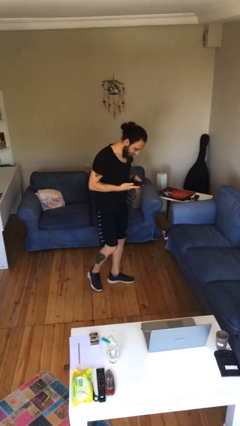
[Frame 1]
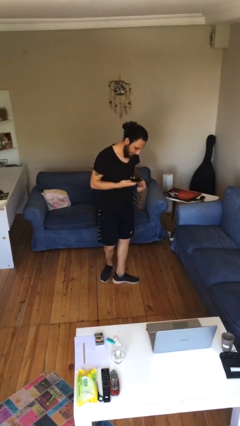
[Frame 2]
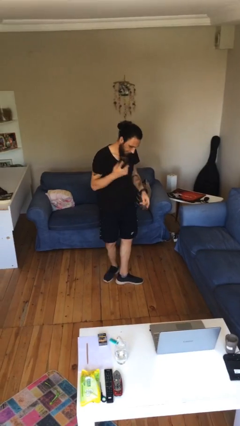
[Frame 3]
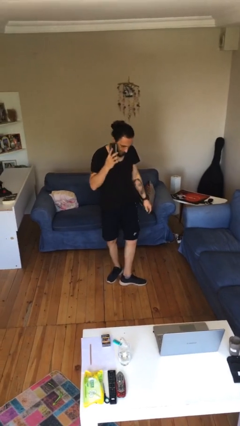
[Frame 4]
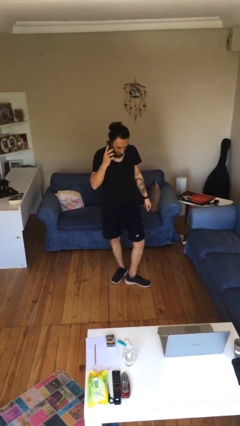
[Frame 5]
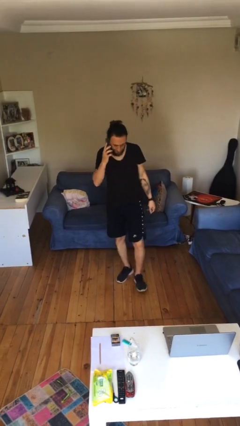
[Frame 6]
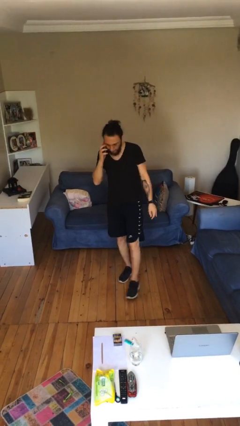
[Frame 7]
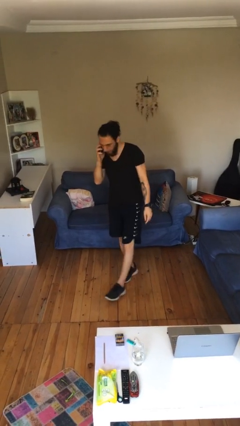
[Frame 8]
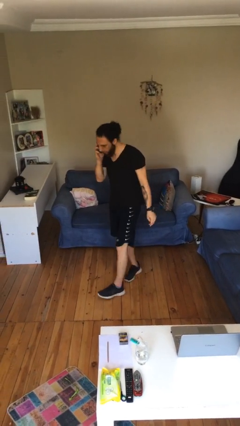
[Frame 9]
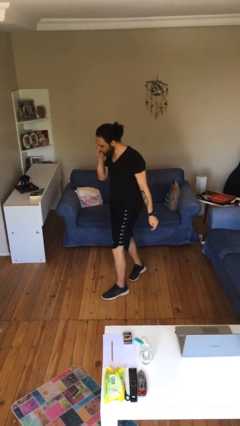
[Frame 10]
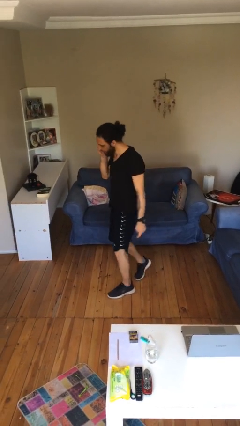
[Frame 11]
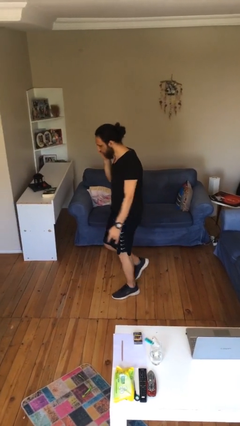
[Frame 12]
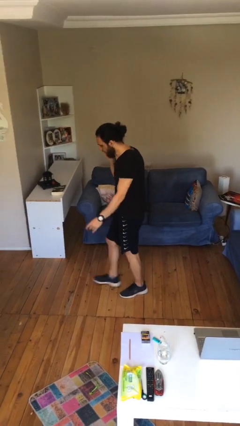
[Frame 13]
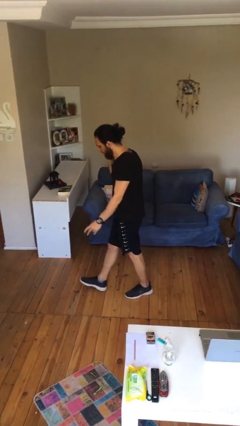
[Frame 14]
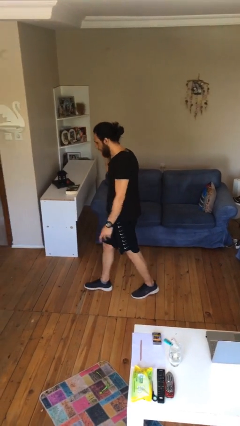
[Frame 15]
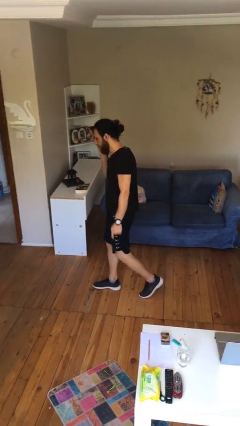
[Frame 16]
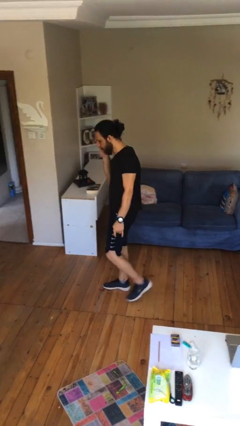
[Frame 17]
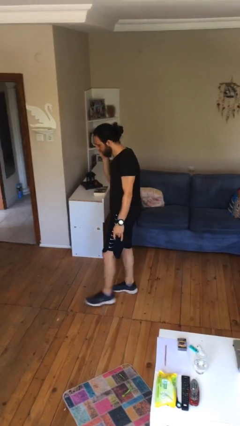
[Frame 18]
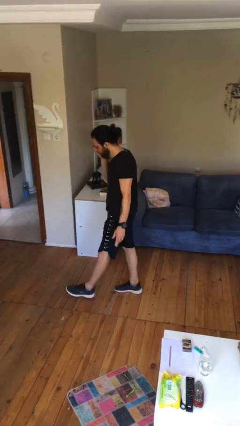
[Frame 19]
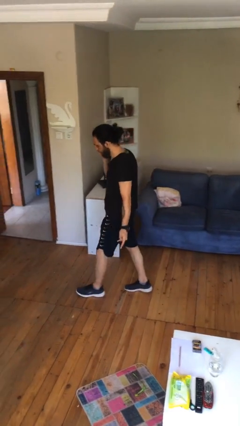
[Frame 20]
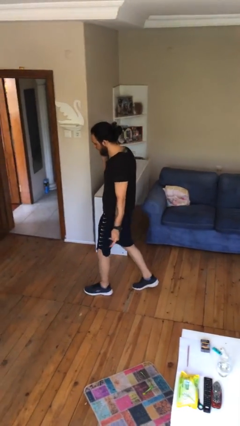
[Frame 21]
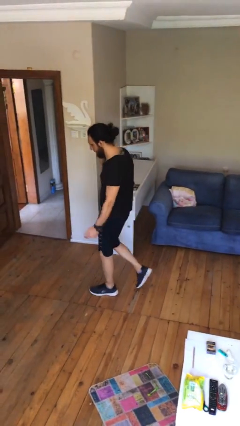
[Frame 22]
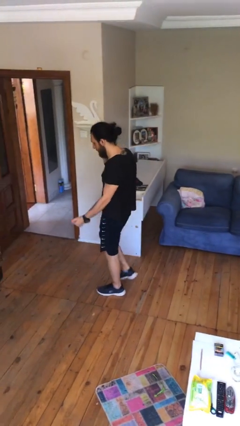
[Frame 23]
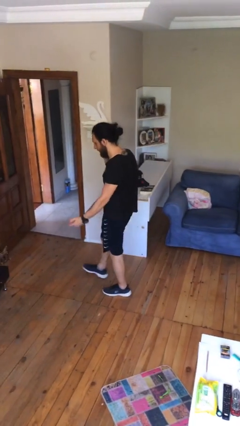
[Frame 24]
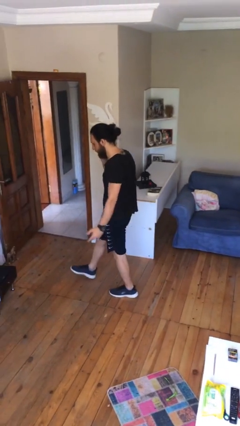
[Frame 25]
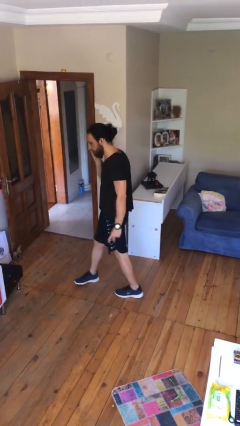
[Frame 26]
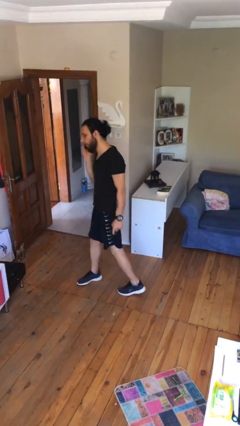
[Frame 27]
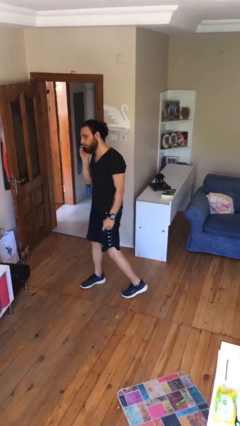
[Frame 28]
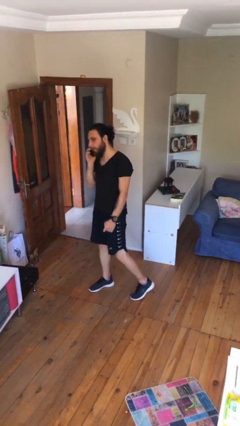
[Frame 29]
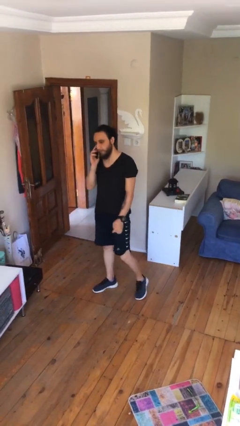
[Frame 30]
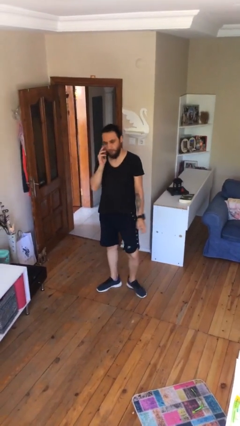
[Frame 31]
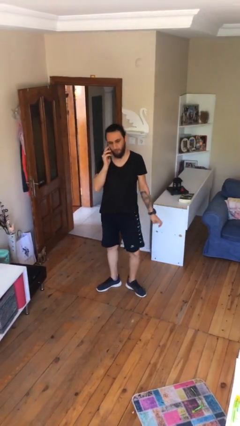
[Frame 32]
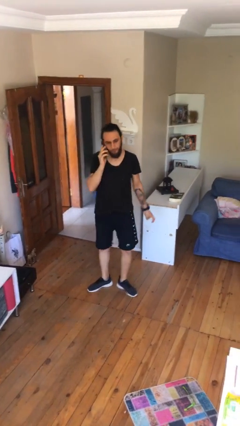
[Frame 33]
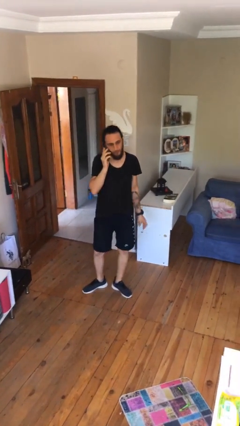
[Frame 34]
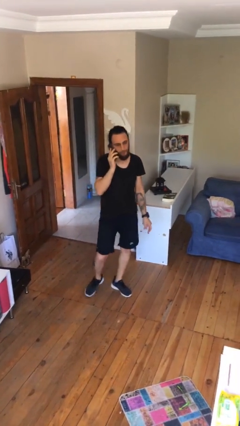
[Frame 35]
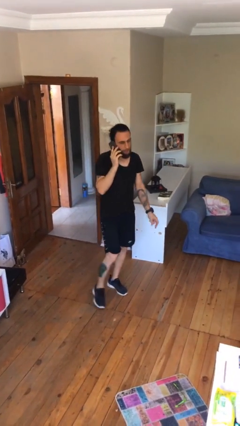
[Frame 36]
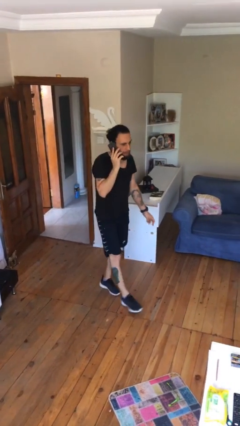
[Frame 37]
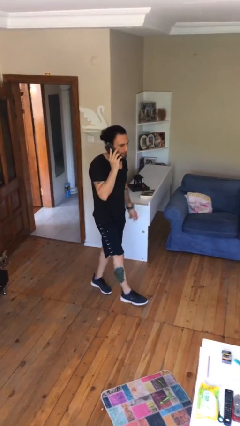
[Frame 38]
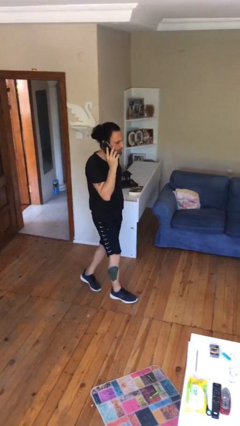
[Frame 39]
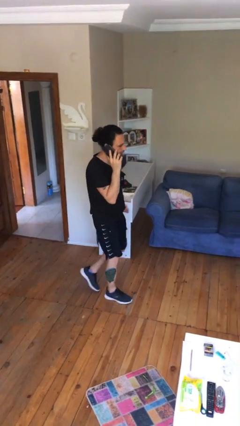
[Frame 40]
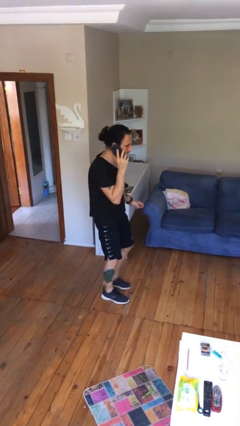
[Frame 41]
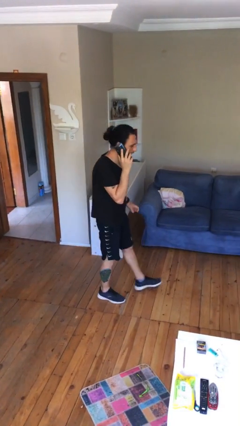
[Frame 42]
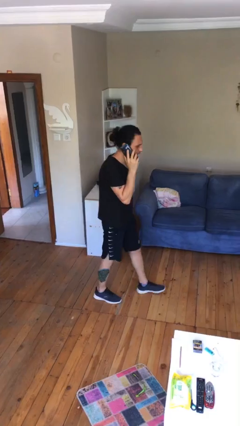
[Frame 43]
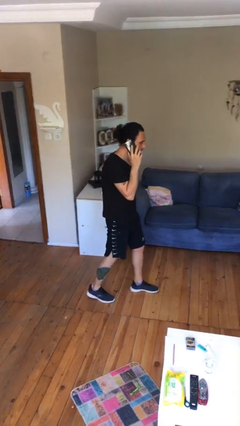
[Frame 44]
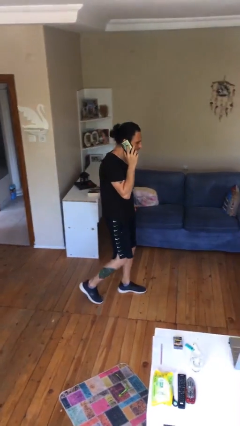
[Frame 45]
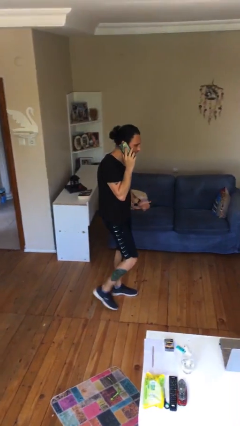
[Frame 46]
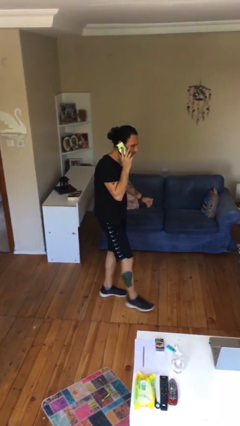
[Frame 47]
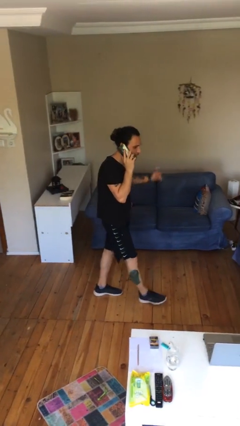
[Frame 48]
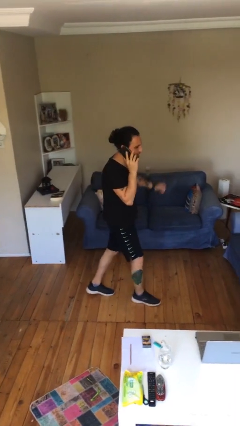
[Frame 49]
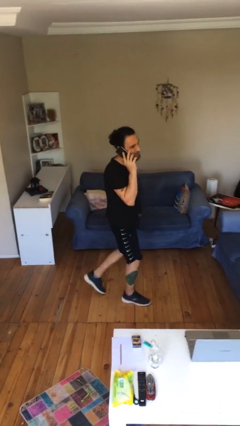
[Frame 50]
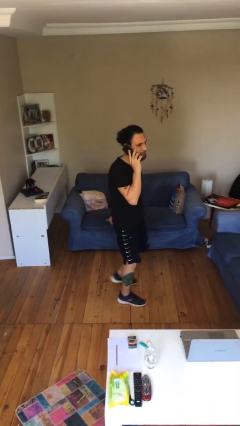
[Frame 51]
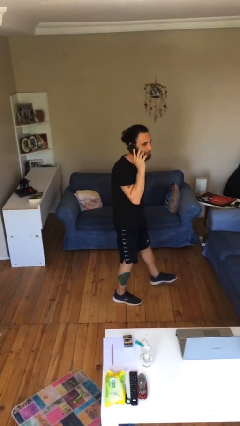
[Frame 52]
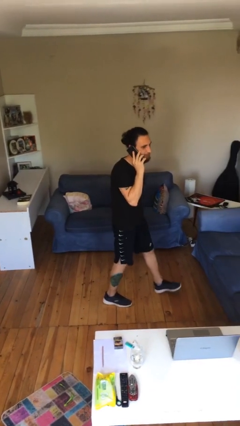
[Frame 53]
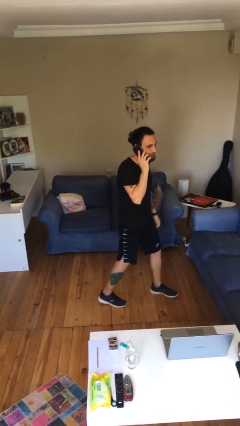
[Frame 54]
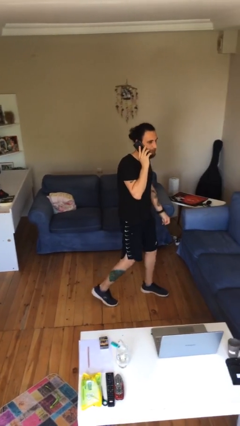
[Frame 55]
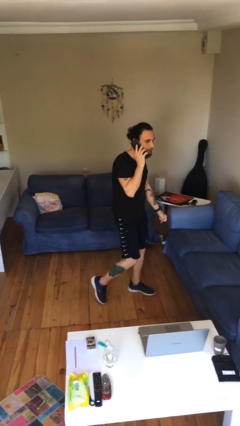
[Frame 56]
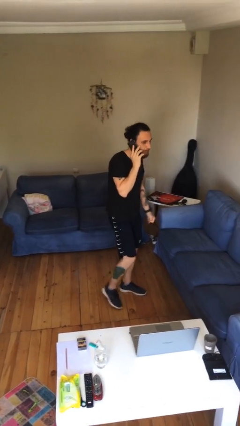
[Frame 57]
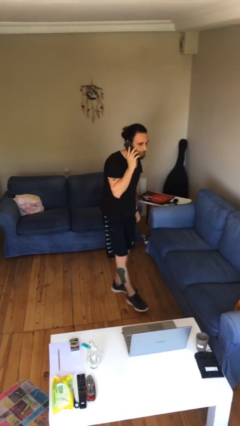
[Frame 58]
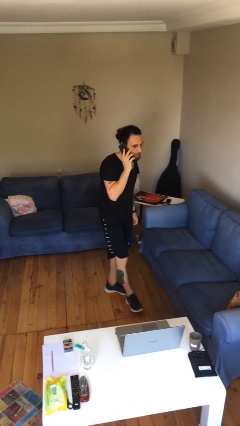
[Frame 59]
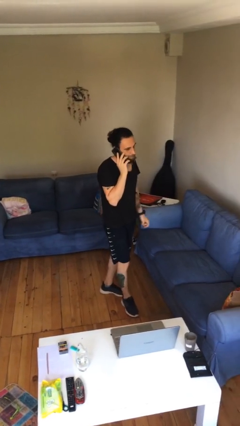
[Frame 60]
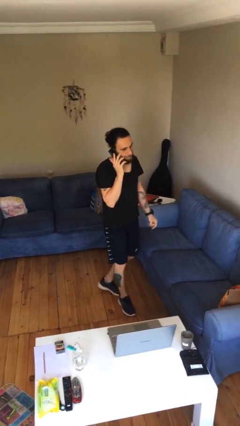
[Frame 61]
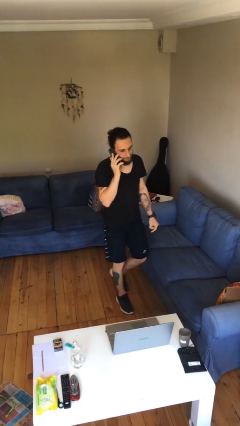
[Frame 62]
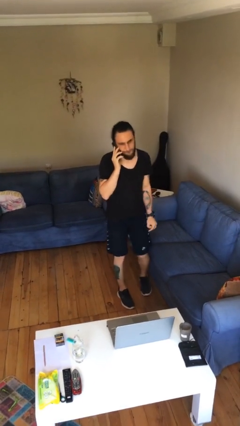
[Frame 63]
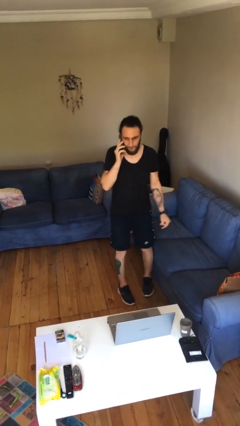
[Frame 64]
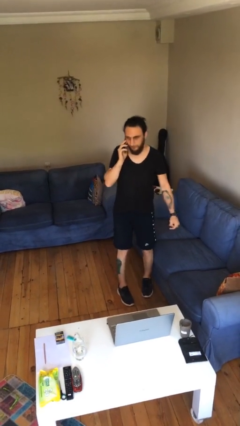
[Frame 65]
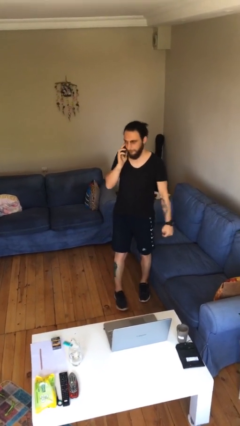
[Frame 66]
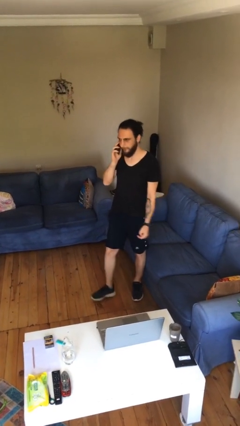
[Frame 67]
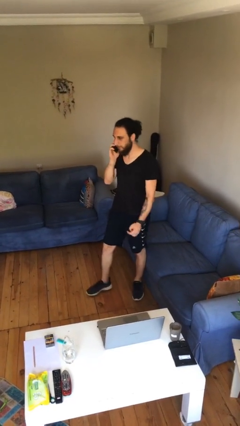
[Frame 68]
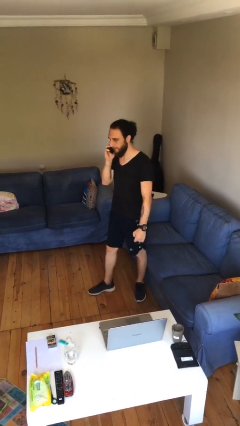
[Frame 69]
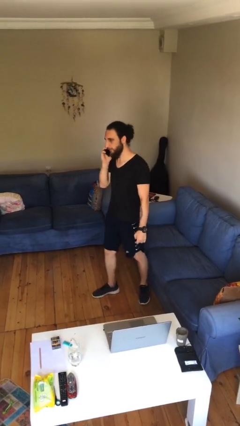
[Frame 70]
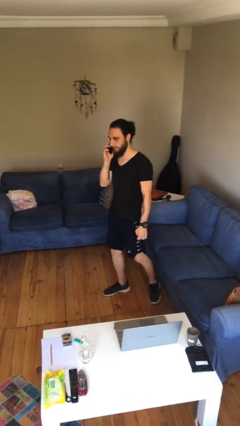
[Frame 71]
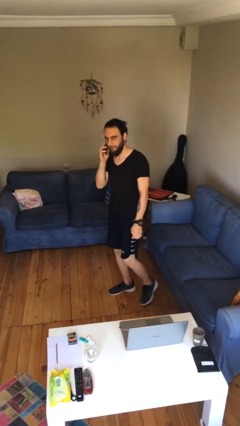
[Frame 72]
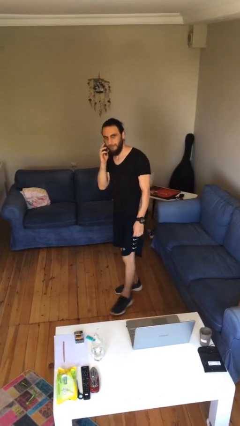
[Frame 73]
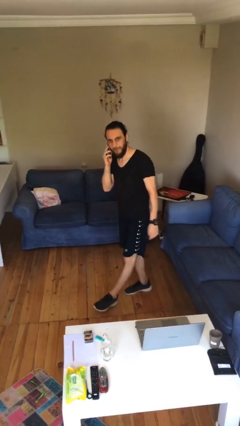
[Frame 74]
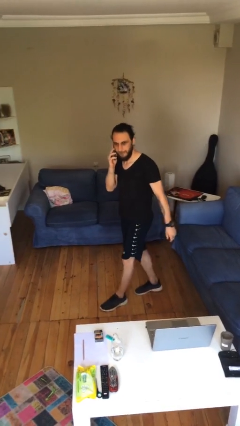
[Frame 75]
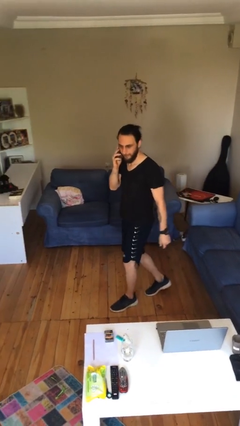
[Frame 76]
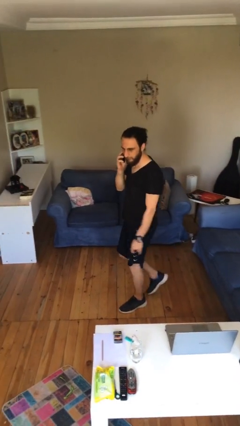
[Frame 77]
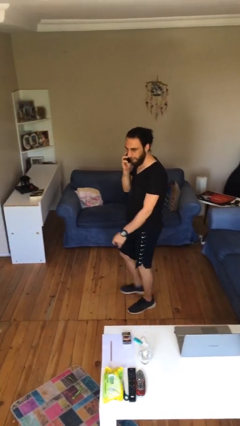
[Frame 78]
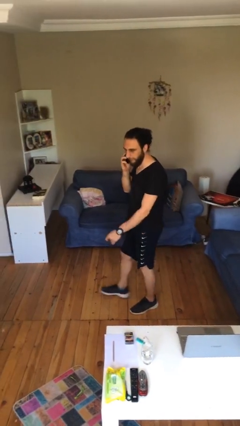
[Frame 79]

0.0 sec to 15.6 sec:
person talks on phone

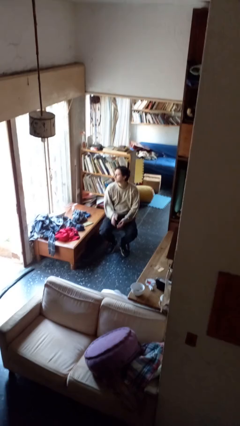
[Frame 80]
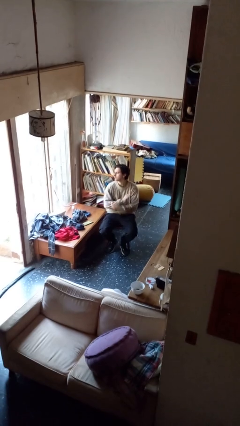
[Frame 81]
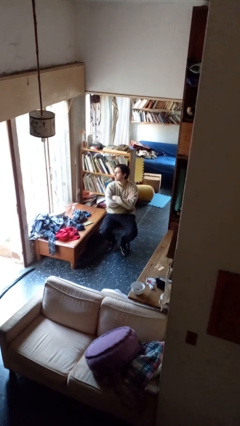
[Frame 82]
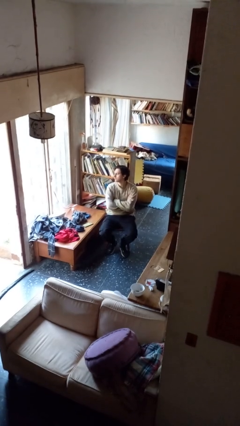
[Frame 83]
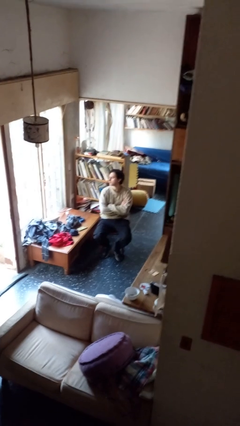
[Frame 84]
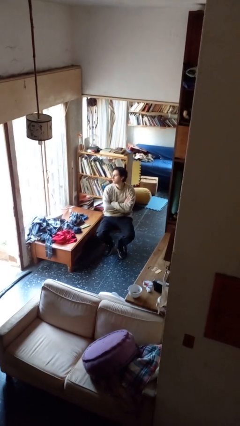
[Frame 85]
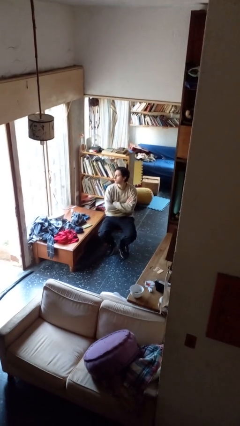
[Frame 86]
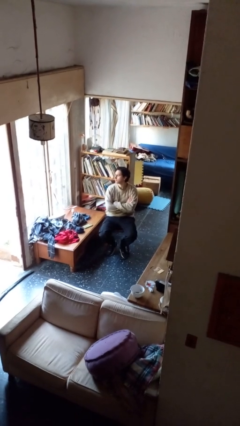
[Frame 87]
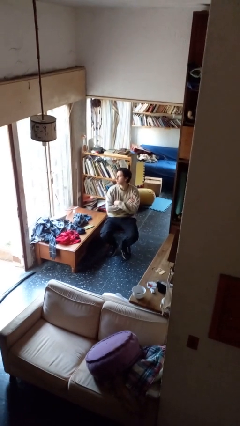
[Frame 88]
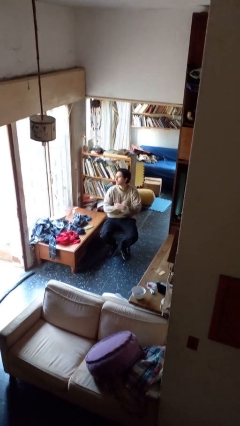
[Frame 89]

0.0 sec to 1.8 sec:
person crosses arms
